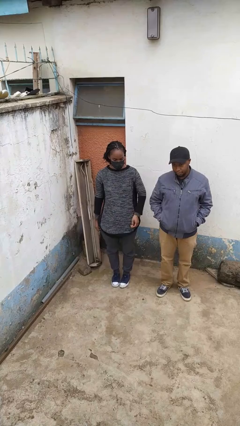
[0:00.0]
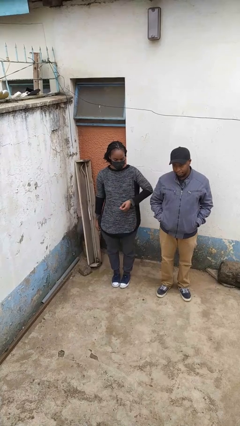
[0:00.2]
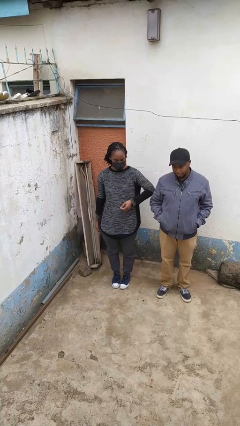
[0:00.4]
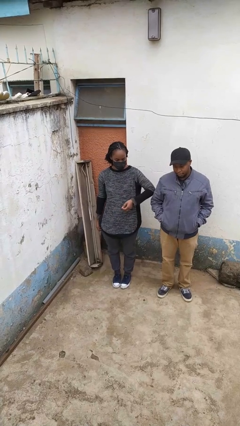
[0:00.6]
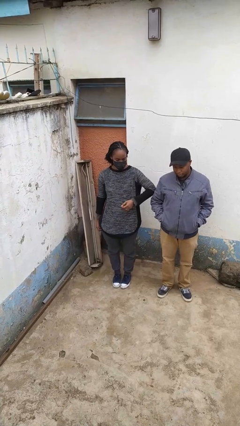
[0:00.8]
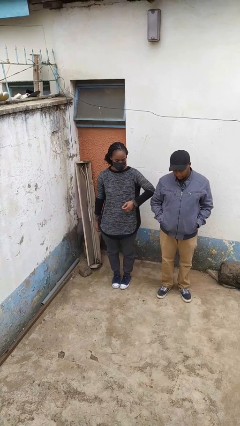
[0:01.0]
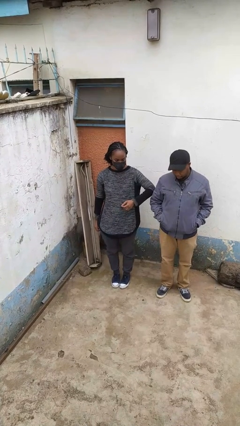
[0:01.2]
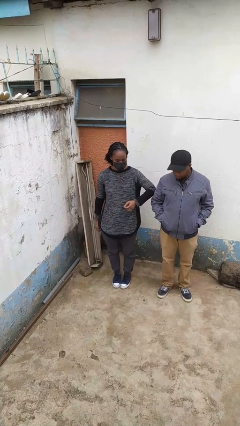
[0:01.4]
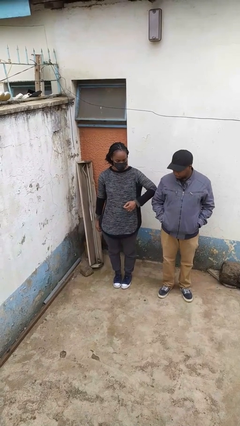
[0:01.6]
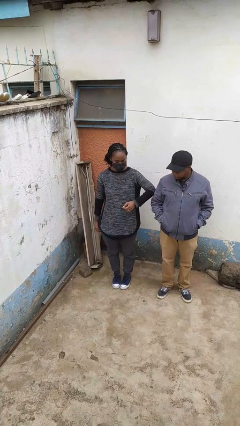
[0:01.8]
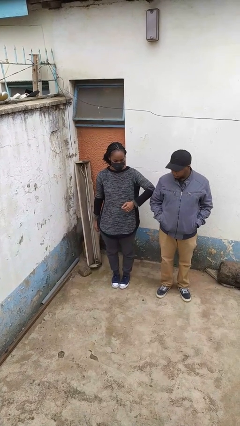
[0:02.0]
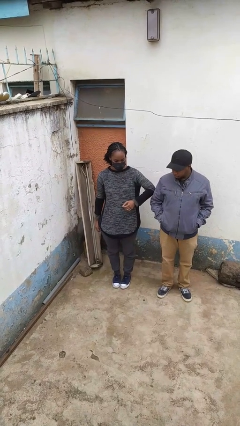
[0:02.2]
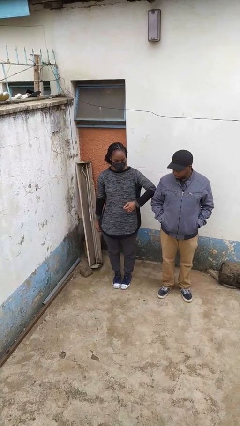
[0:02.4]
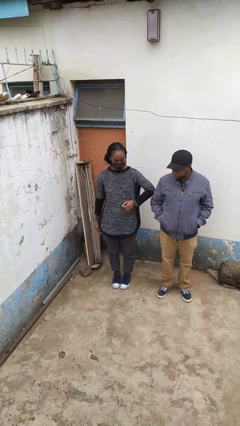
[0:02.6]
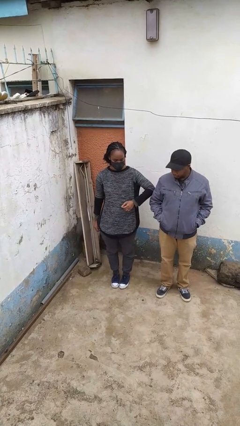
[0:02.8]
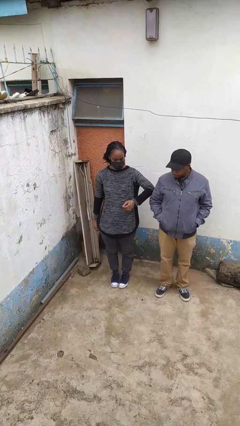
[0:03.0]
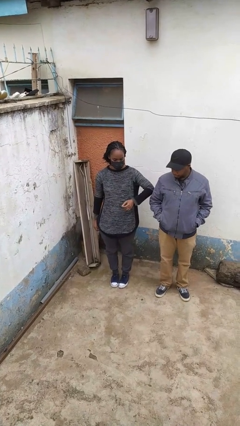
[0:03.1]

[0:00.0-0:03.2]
person nudges person with elbow

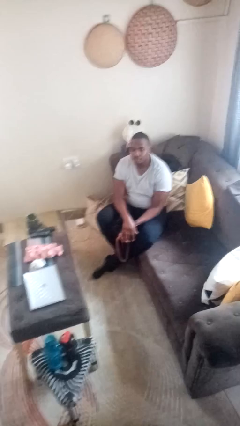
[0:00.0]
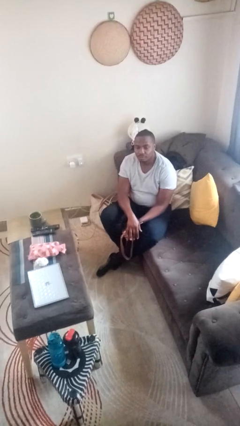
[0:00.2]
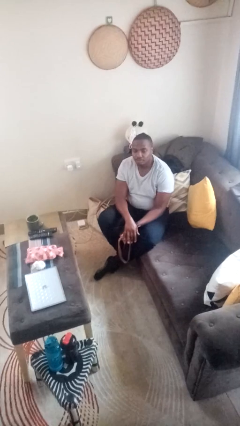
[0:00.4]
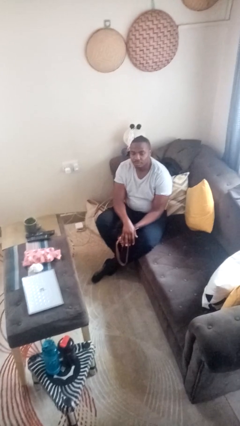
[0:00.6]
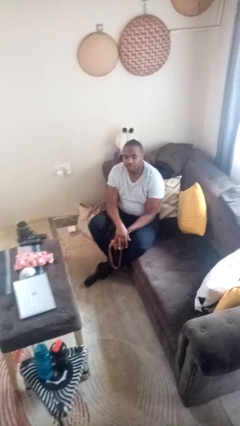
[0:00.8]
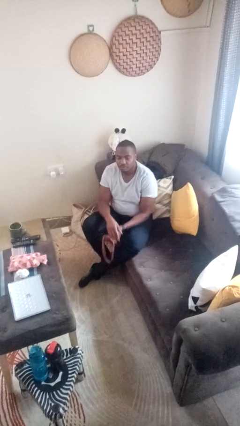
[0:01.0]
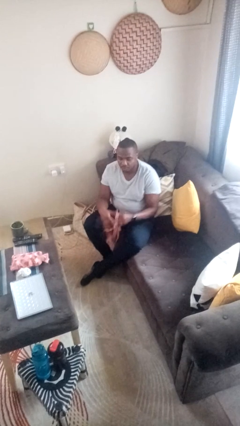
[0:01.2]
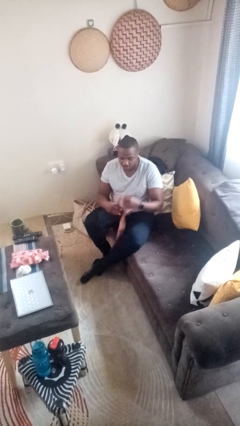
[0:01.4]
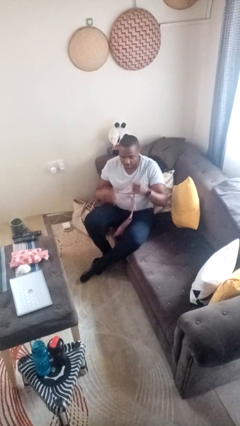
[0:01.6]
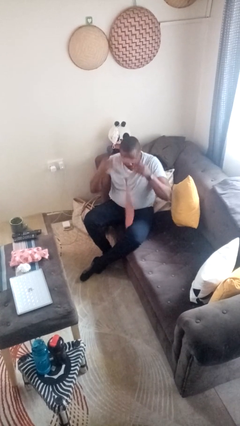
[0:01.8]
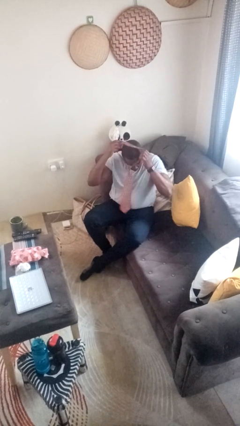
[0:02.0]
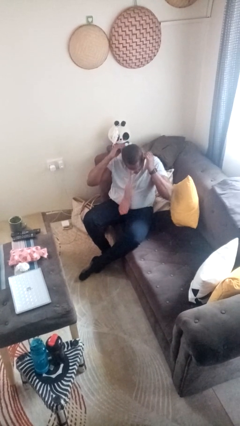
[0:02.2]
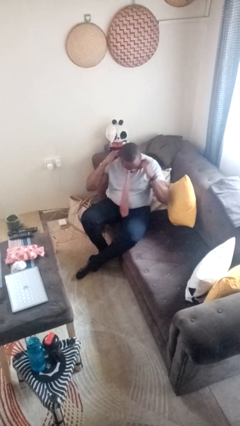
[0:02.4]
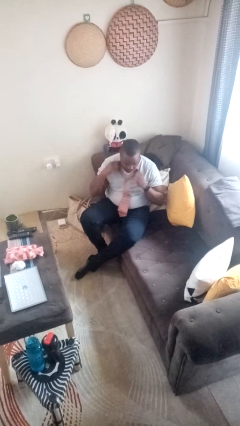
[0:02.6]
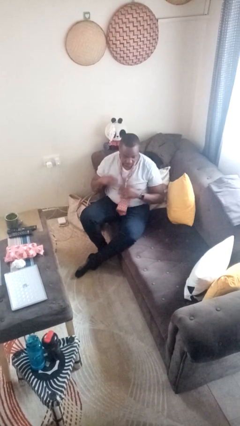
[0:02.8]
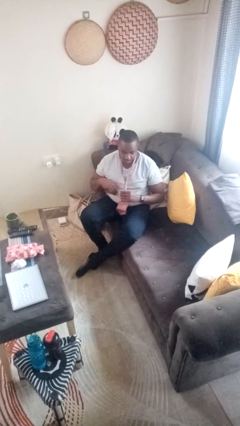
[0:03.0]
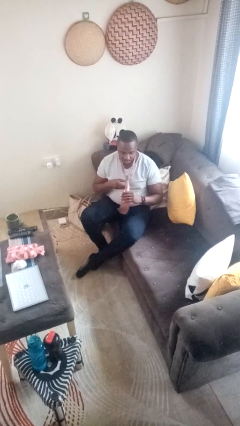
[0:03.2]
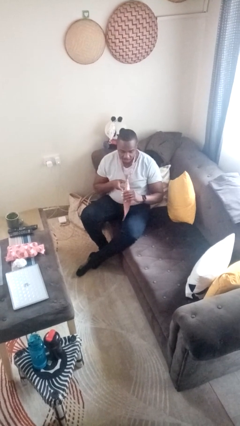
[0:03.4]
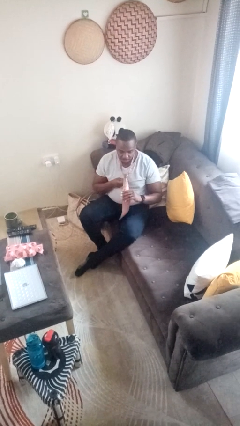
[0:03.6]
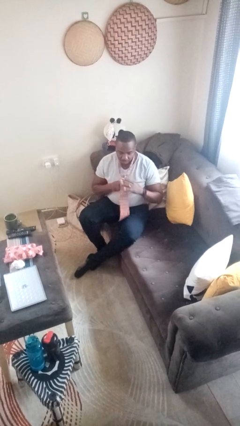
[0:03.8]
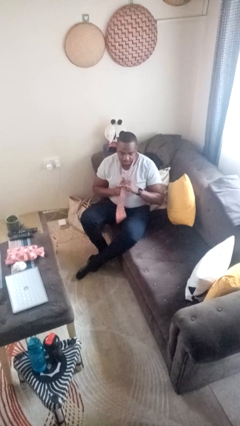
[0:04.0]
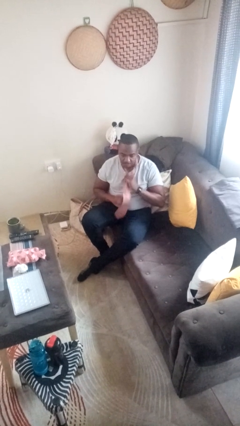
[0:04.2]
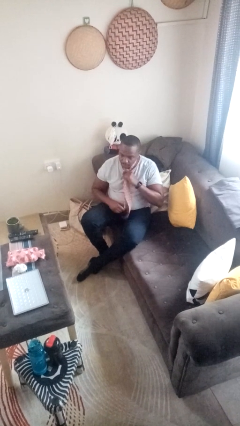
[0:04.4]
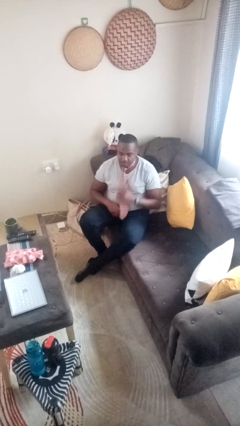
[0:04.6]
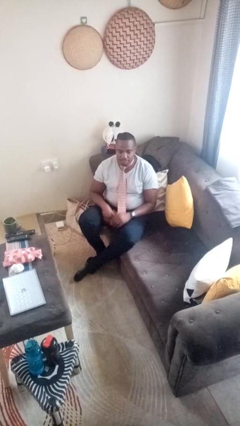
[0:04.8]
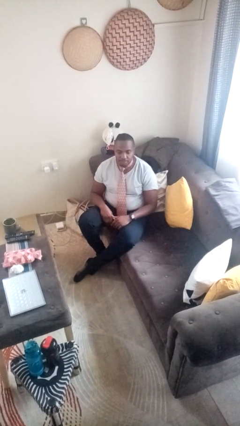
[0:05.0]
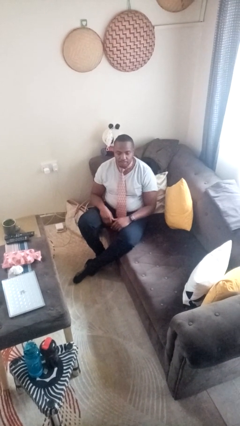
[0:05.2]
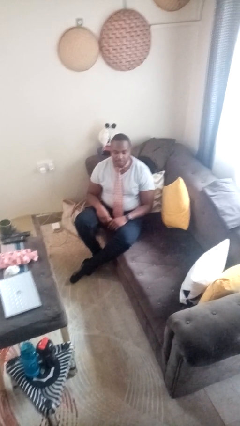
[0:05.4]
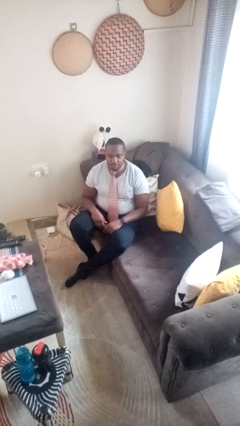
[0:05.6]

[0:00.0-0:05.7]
person puts on necktie

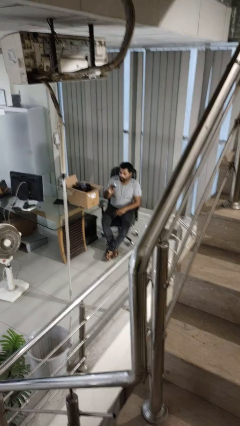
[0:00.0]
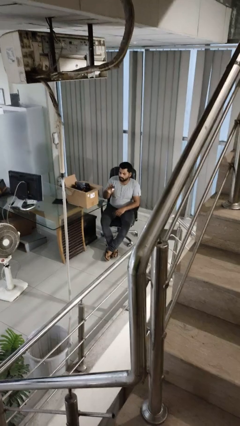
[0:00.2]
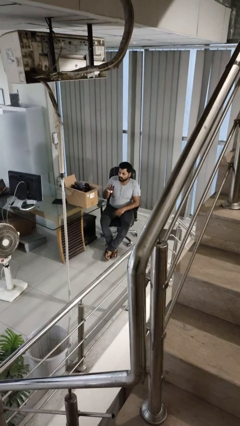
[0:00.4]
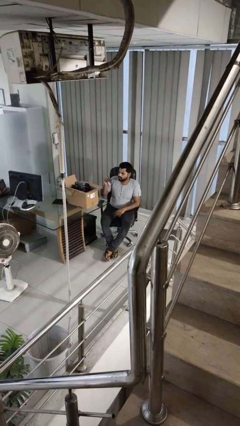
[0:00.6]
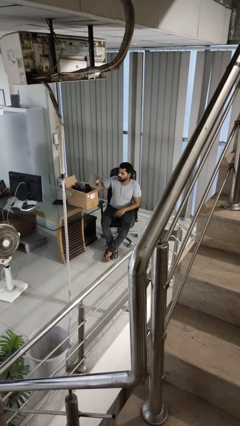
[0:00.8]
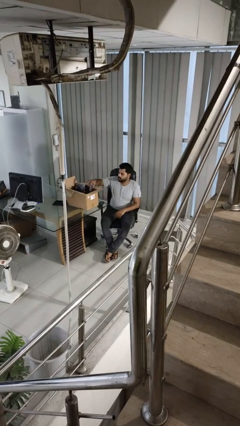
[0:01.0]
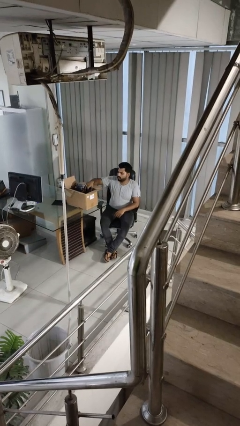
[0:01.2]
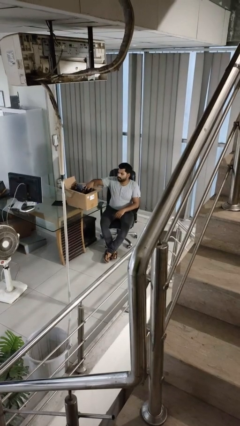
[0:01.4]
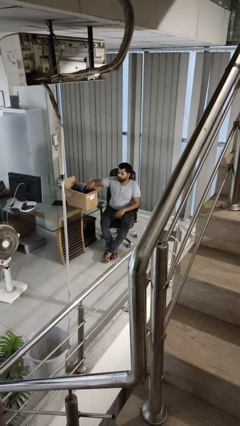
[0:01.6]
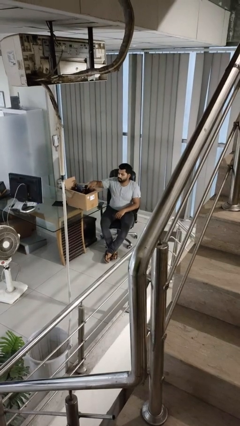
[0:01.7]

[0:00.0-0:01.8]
person puts object into box

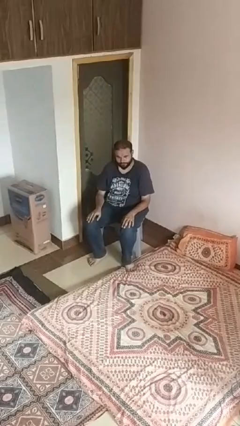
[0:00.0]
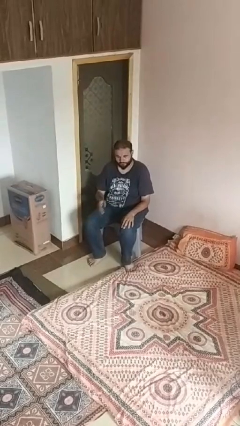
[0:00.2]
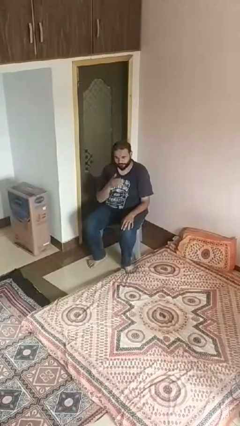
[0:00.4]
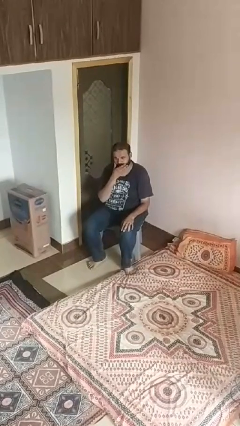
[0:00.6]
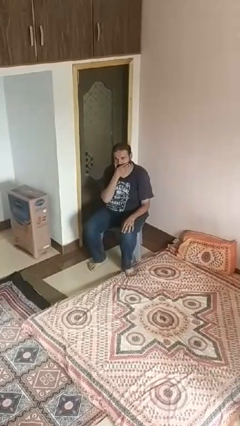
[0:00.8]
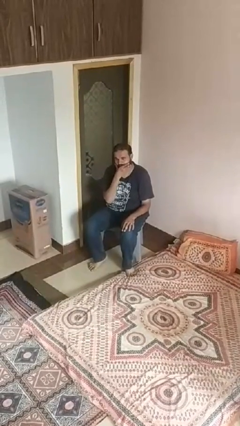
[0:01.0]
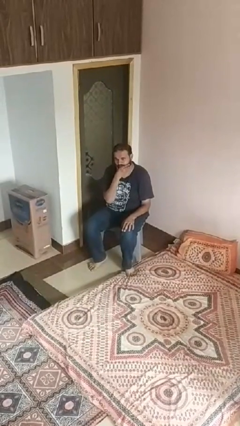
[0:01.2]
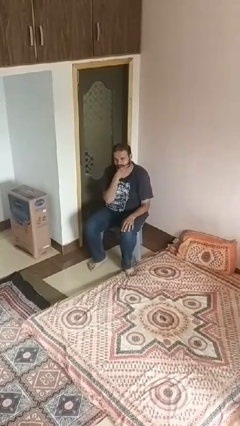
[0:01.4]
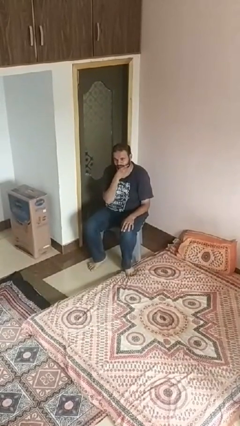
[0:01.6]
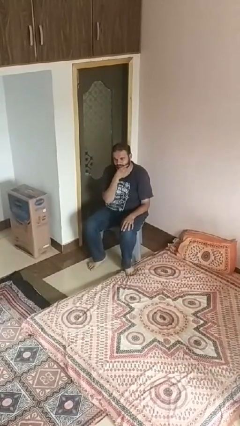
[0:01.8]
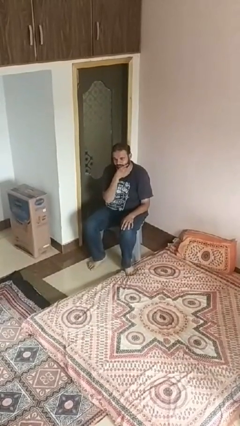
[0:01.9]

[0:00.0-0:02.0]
person strokes chin

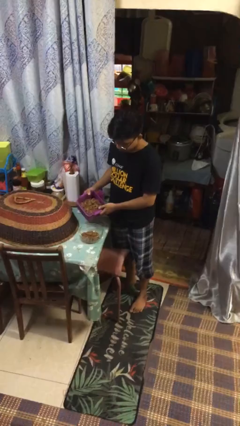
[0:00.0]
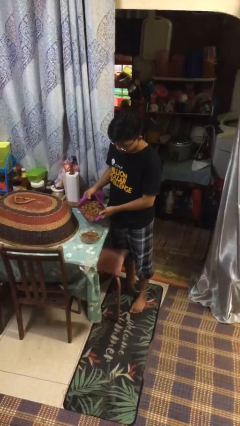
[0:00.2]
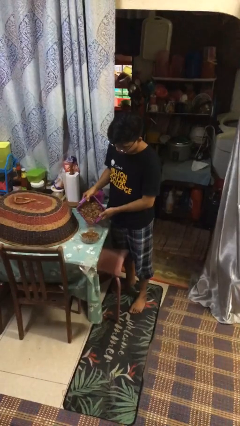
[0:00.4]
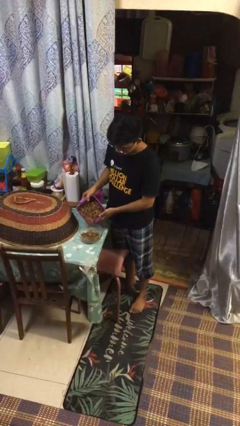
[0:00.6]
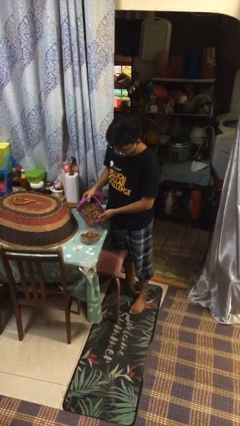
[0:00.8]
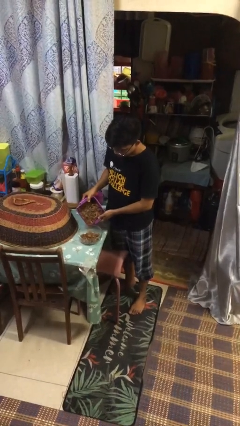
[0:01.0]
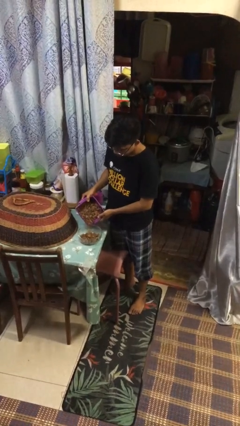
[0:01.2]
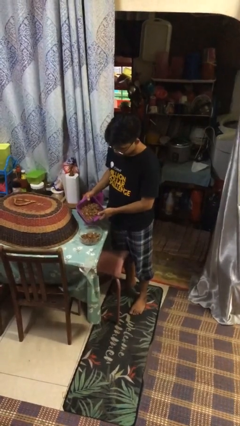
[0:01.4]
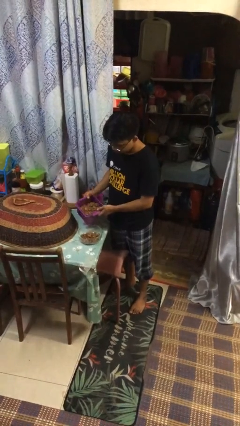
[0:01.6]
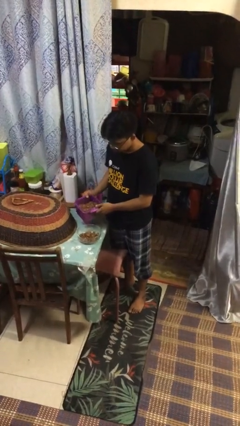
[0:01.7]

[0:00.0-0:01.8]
person pours into bowl

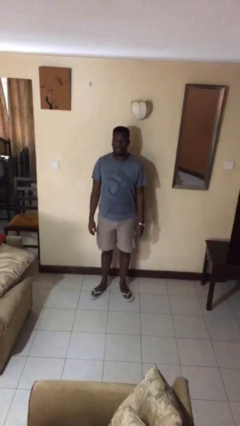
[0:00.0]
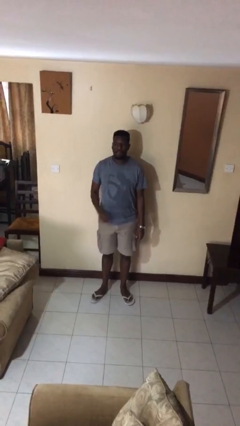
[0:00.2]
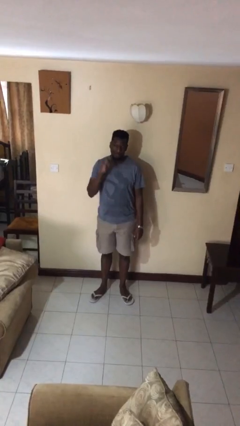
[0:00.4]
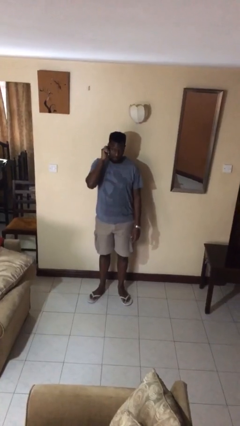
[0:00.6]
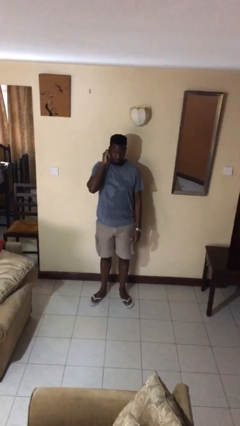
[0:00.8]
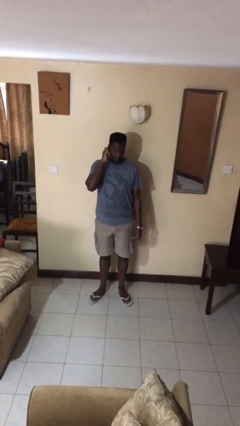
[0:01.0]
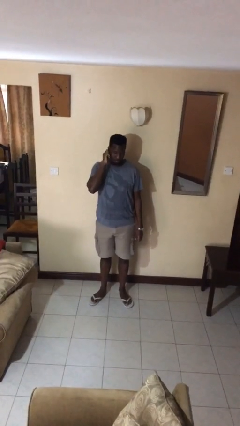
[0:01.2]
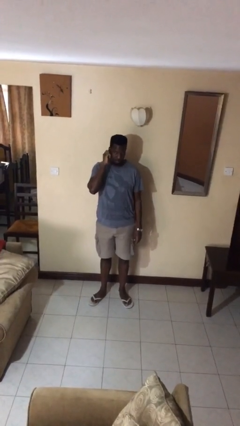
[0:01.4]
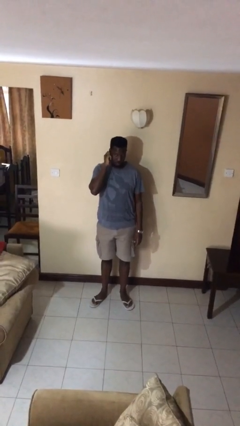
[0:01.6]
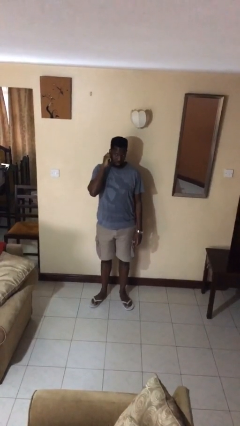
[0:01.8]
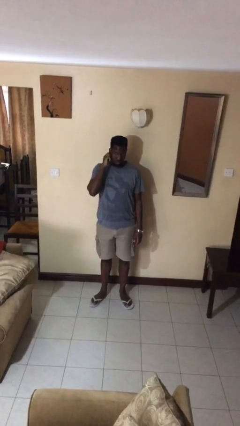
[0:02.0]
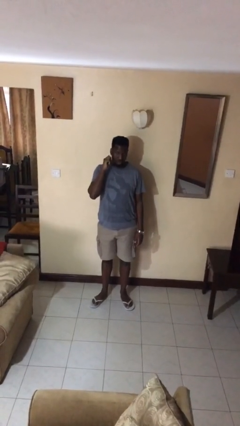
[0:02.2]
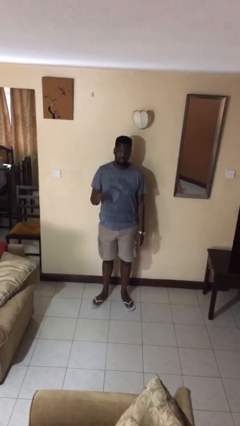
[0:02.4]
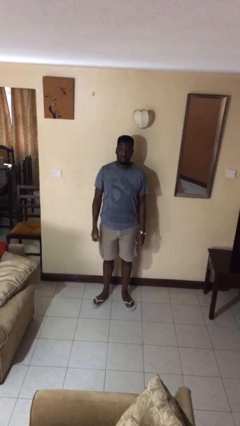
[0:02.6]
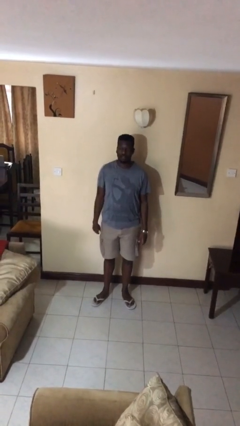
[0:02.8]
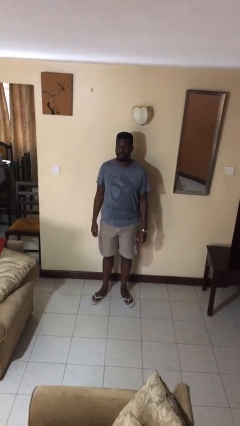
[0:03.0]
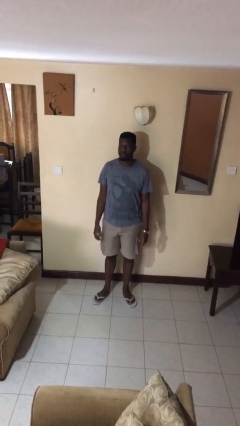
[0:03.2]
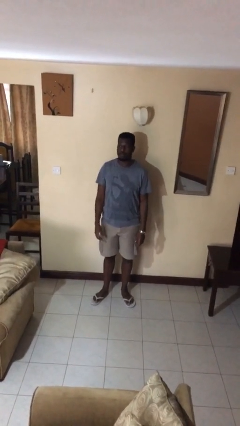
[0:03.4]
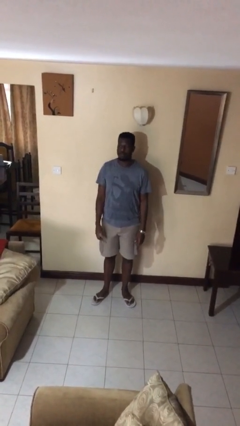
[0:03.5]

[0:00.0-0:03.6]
person touches earlobe
